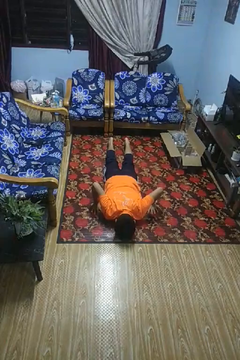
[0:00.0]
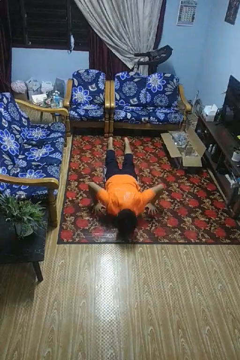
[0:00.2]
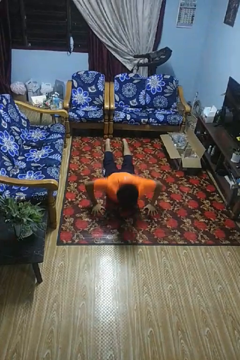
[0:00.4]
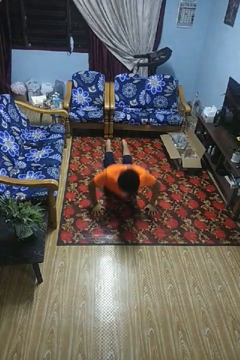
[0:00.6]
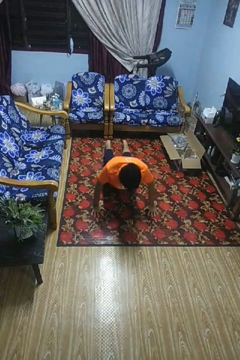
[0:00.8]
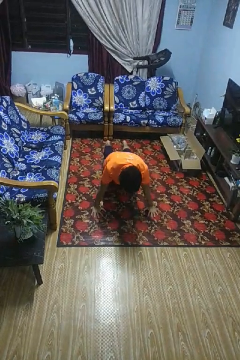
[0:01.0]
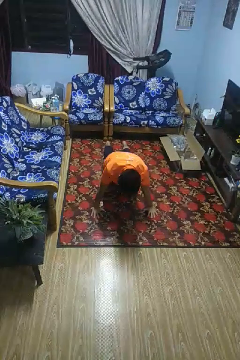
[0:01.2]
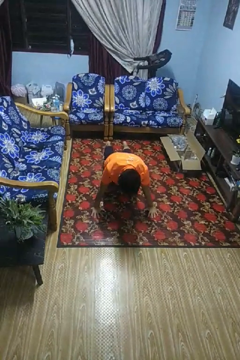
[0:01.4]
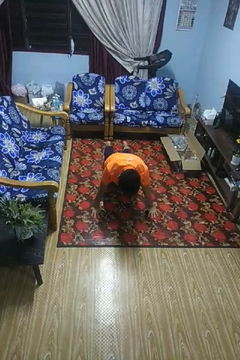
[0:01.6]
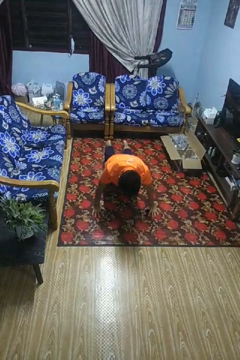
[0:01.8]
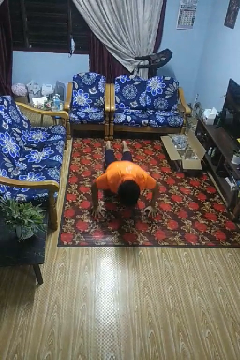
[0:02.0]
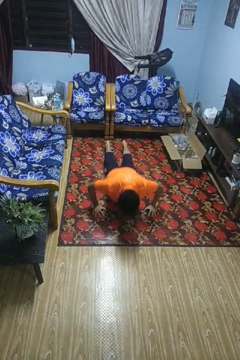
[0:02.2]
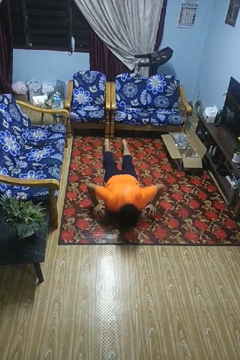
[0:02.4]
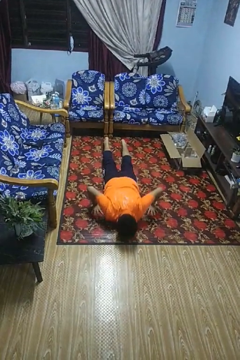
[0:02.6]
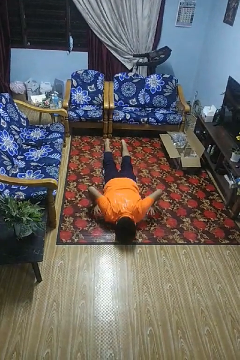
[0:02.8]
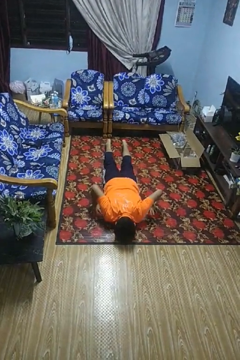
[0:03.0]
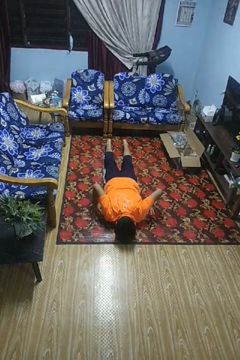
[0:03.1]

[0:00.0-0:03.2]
person exercises with pushup

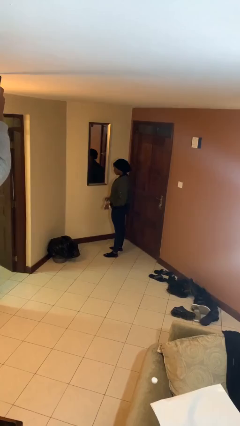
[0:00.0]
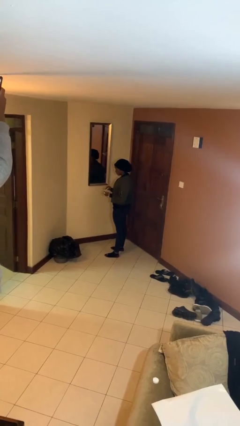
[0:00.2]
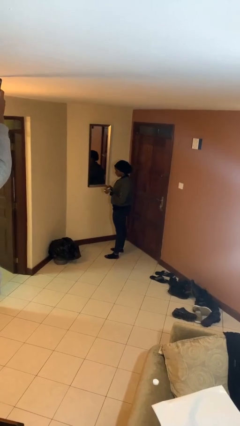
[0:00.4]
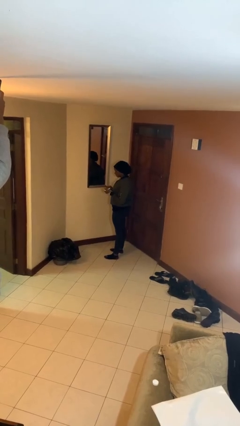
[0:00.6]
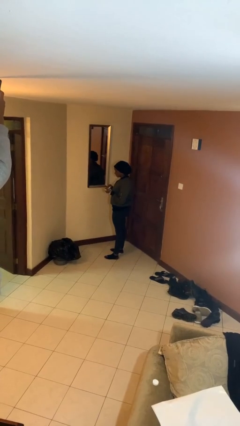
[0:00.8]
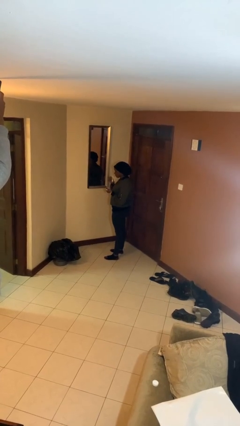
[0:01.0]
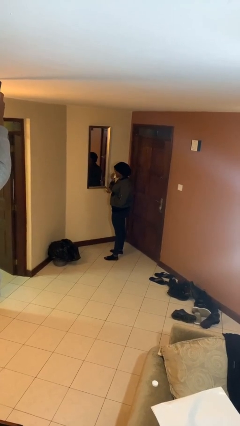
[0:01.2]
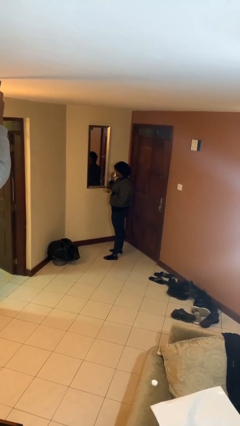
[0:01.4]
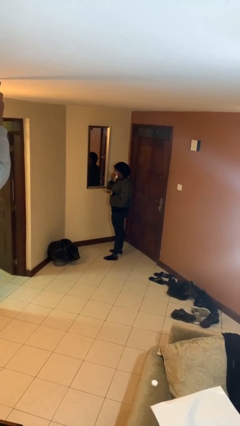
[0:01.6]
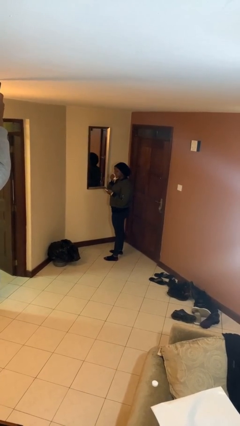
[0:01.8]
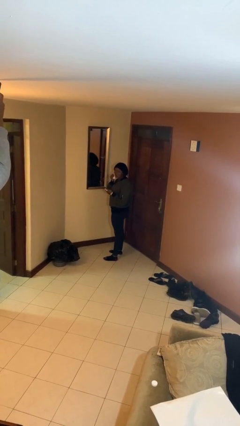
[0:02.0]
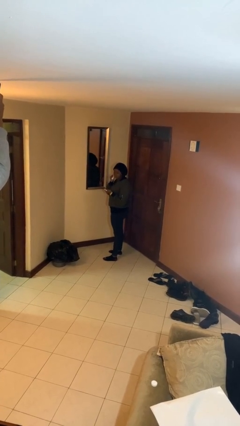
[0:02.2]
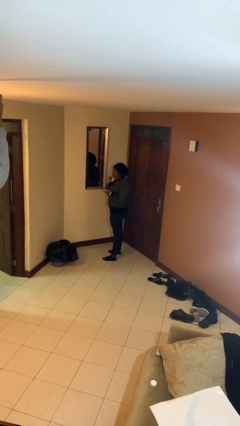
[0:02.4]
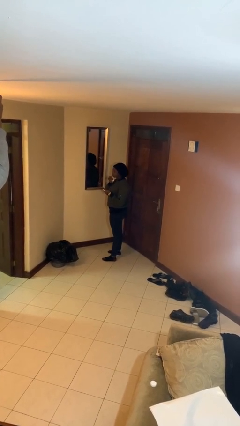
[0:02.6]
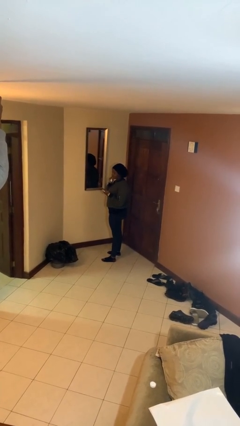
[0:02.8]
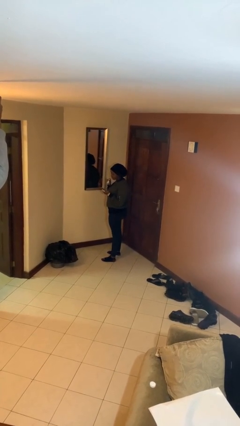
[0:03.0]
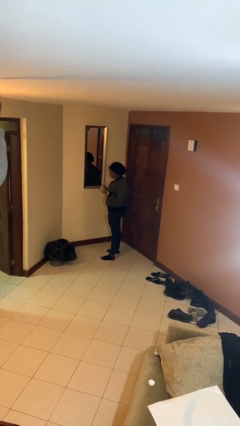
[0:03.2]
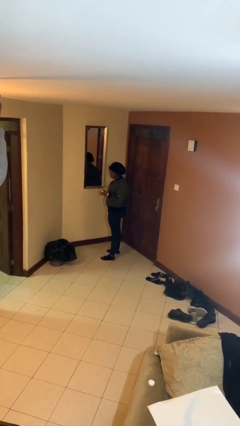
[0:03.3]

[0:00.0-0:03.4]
person applies foundation makeup

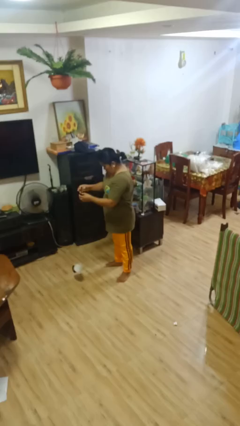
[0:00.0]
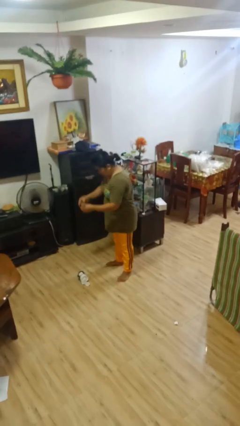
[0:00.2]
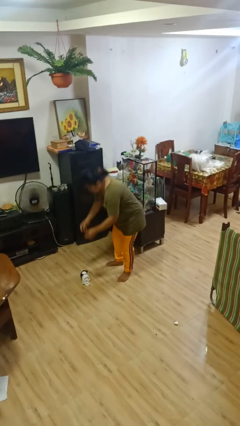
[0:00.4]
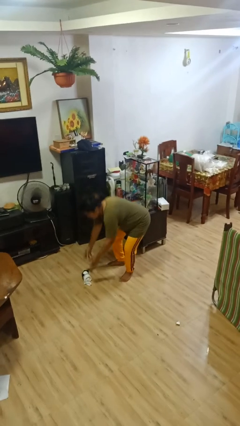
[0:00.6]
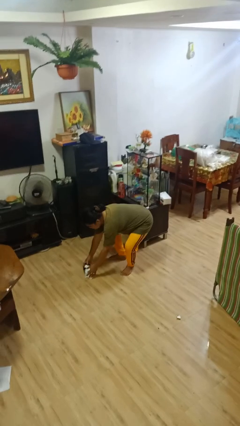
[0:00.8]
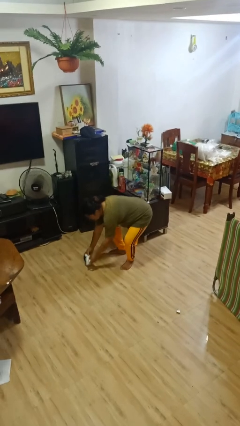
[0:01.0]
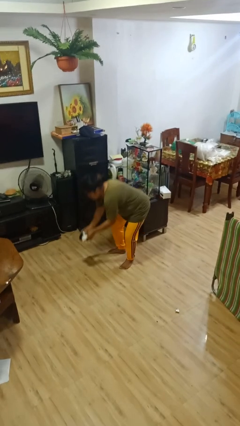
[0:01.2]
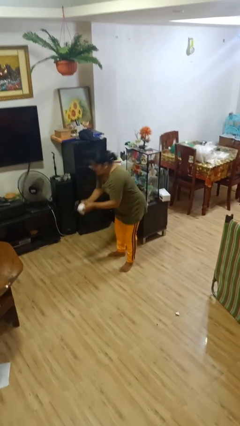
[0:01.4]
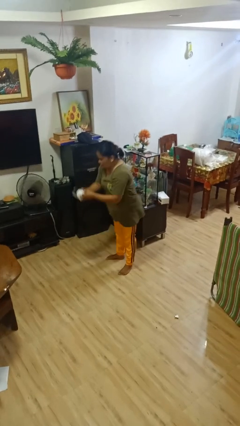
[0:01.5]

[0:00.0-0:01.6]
person picks up object from floor

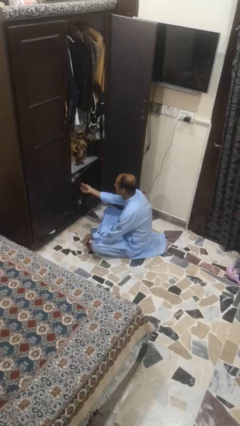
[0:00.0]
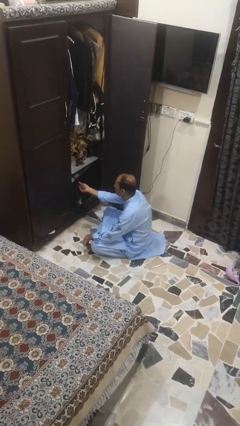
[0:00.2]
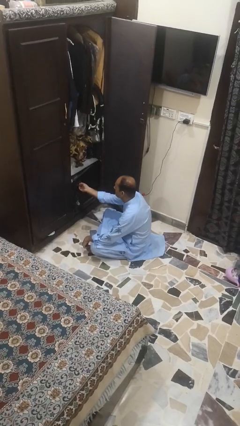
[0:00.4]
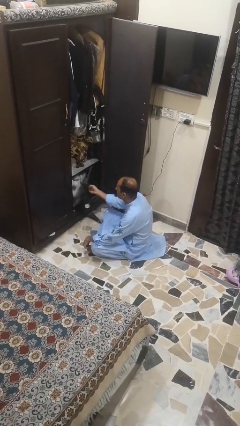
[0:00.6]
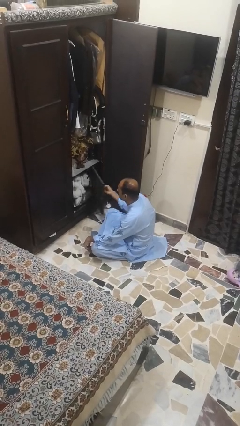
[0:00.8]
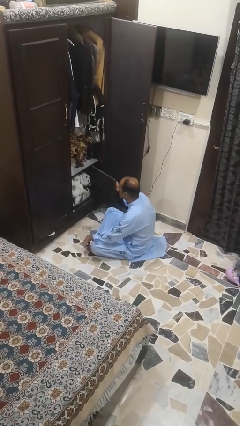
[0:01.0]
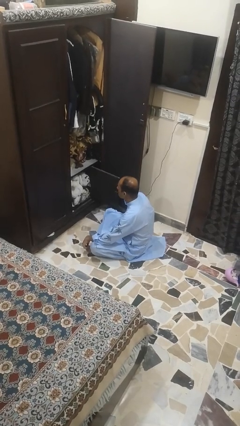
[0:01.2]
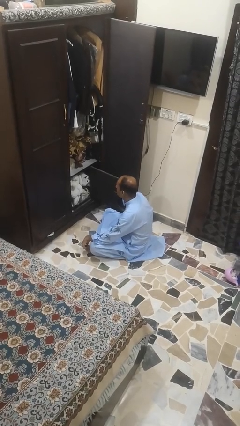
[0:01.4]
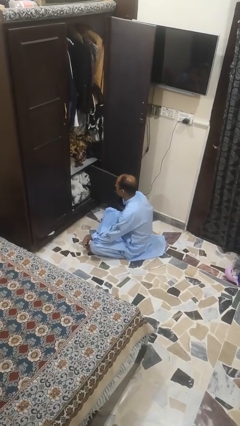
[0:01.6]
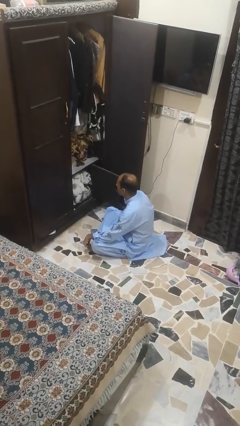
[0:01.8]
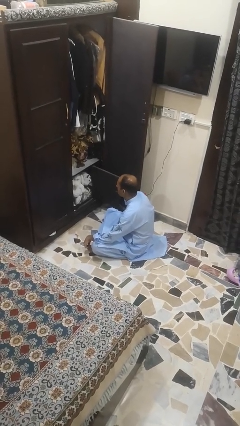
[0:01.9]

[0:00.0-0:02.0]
person opens box

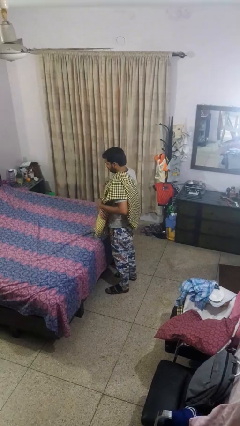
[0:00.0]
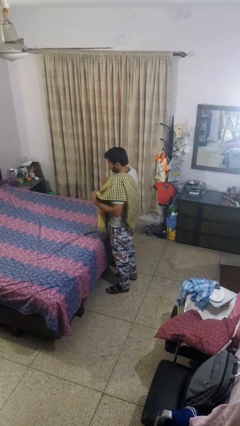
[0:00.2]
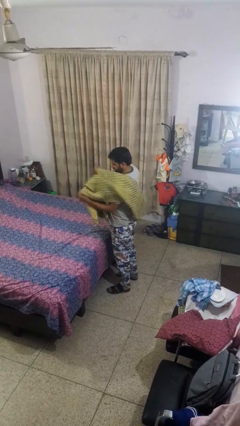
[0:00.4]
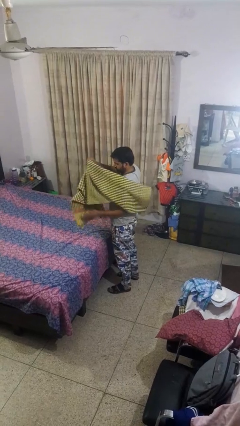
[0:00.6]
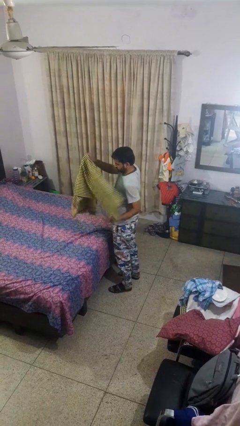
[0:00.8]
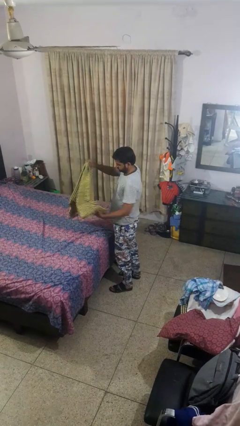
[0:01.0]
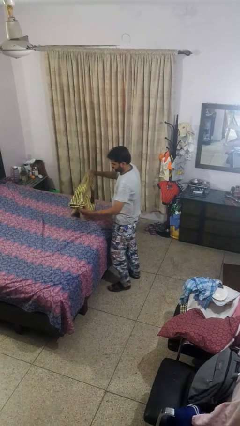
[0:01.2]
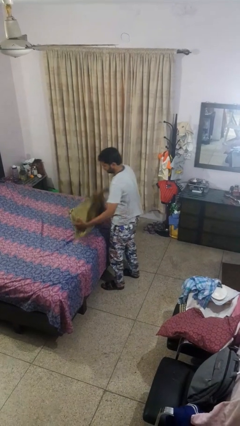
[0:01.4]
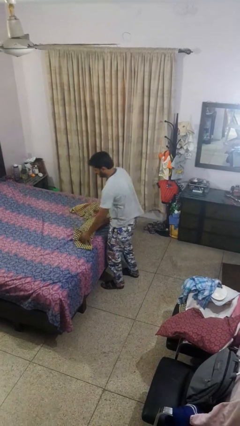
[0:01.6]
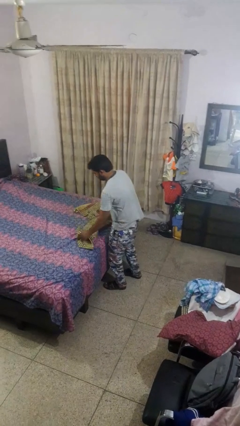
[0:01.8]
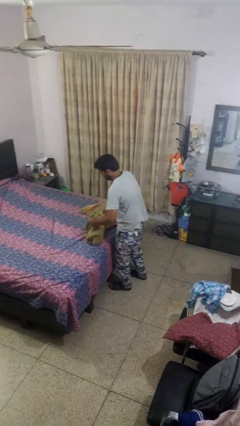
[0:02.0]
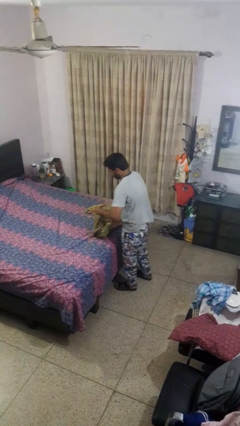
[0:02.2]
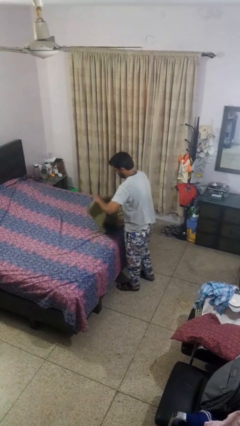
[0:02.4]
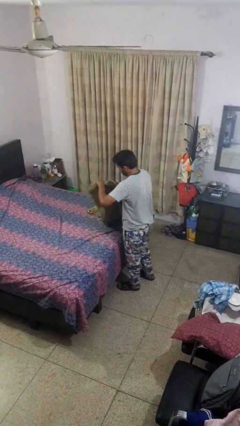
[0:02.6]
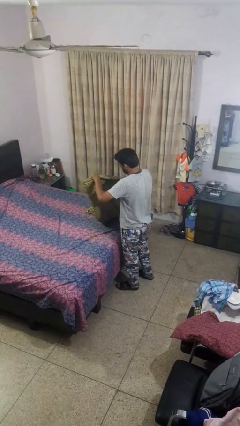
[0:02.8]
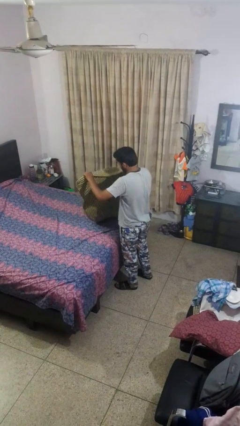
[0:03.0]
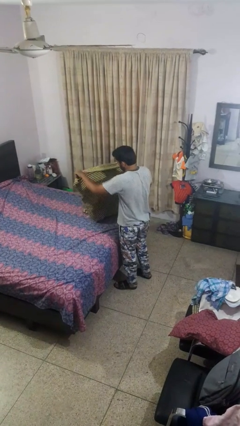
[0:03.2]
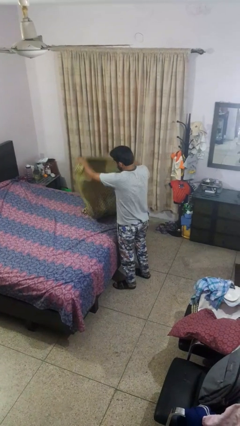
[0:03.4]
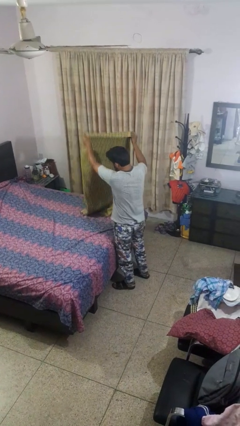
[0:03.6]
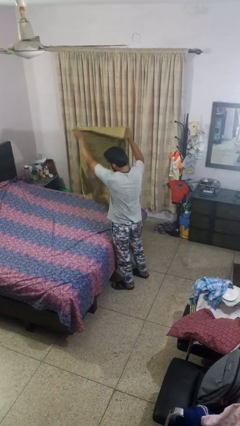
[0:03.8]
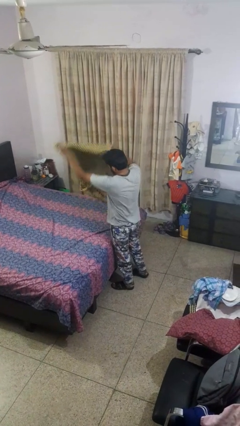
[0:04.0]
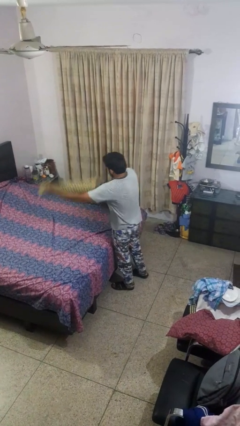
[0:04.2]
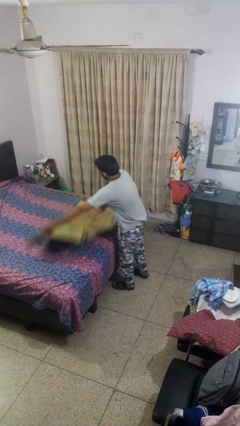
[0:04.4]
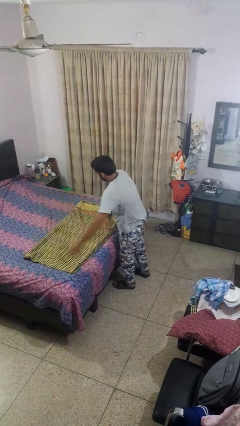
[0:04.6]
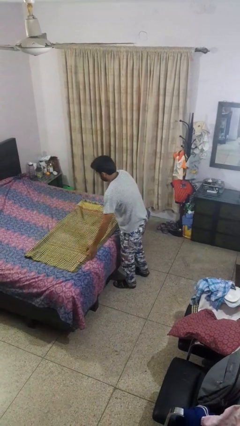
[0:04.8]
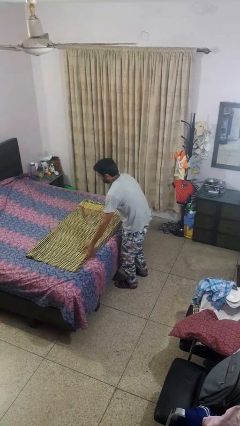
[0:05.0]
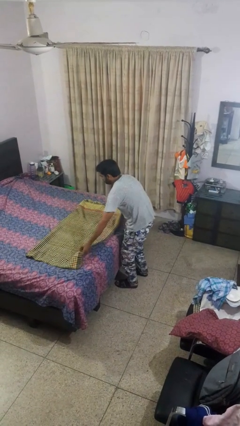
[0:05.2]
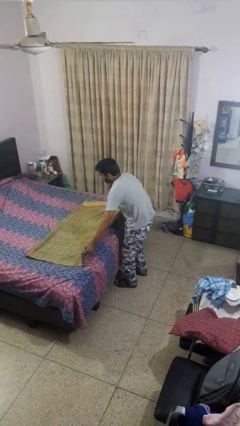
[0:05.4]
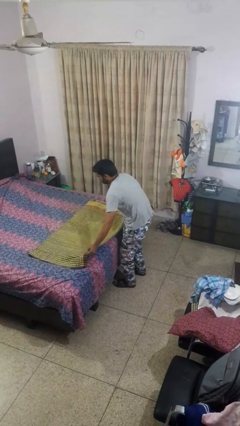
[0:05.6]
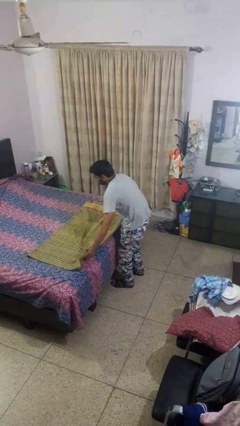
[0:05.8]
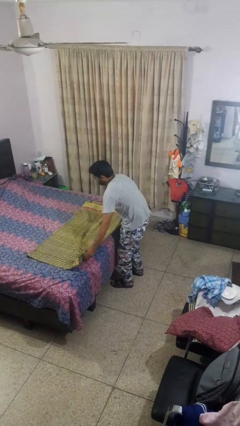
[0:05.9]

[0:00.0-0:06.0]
person makes bed

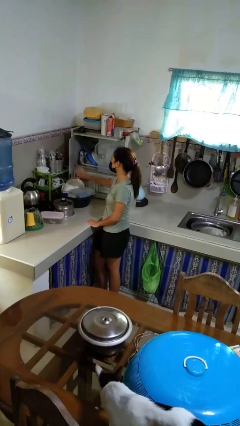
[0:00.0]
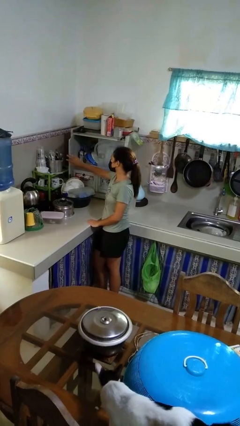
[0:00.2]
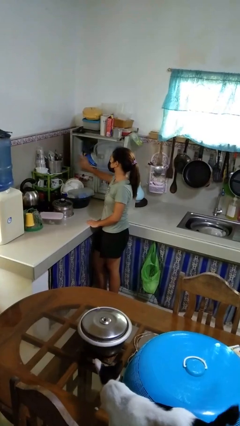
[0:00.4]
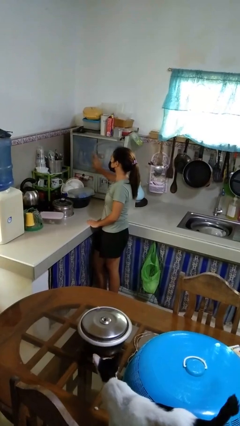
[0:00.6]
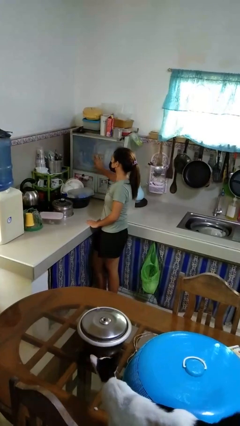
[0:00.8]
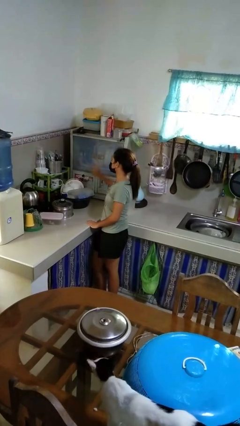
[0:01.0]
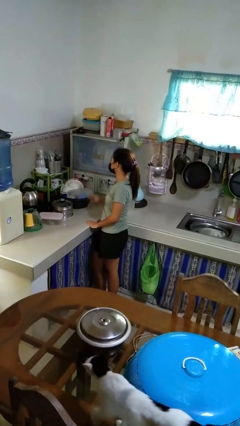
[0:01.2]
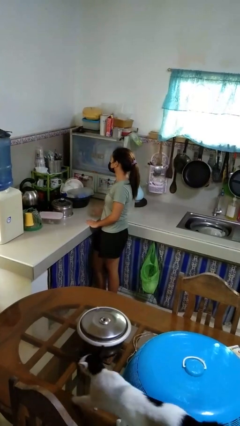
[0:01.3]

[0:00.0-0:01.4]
person closes kitchen drawer
